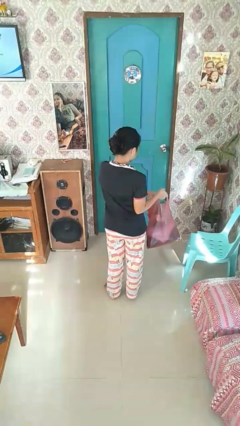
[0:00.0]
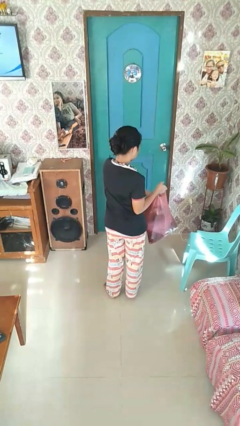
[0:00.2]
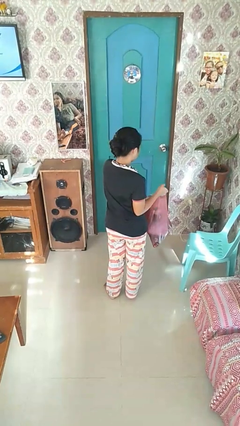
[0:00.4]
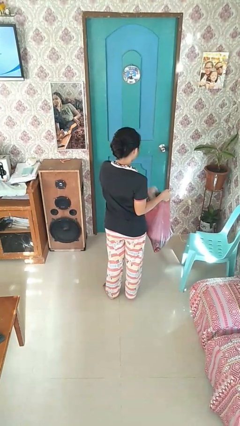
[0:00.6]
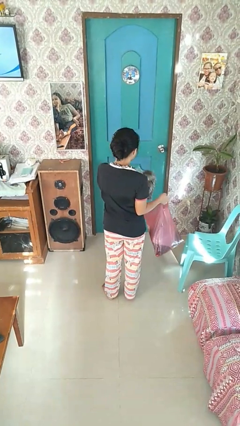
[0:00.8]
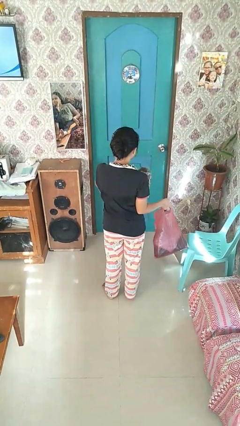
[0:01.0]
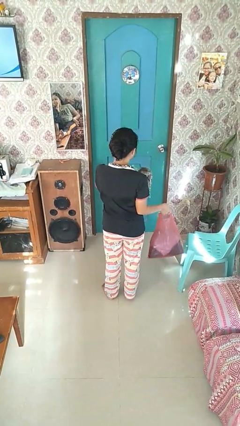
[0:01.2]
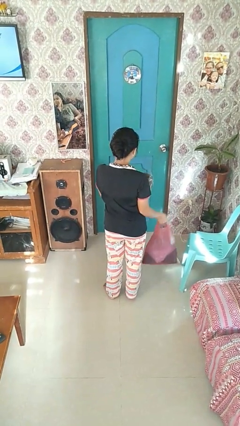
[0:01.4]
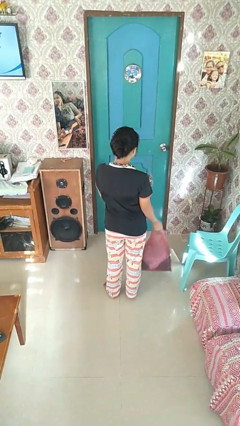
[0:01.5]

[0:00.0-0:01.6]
person takes object from bag

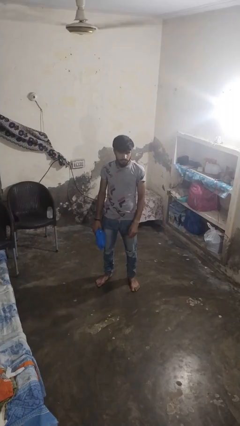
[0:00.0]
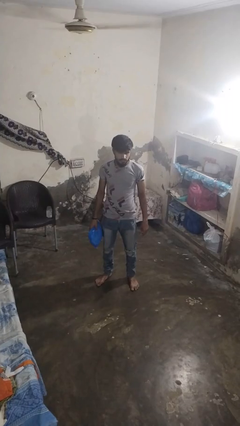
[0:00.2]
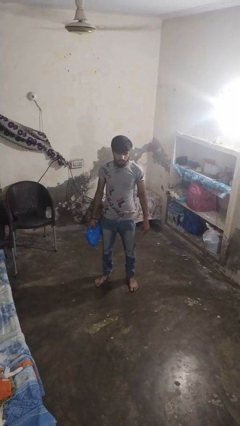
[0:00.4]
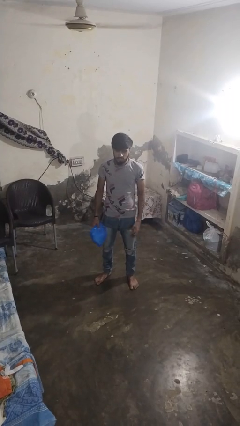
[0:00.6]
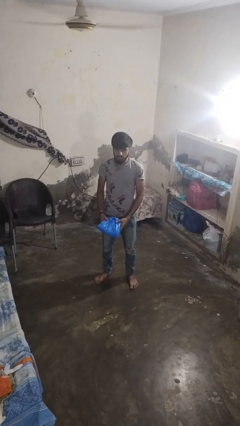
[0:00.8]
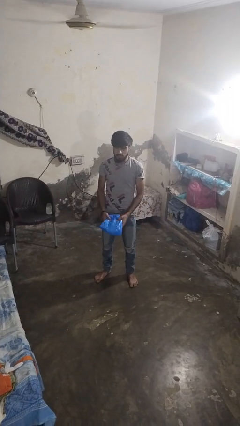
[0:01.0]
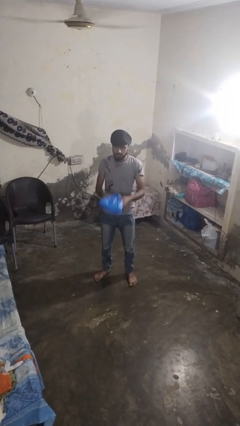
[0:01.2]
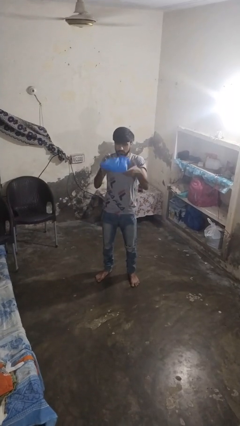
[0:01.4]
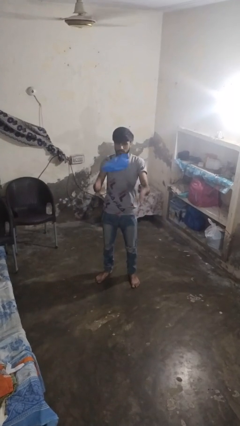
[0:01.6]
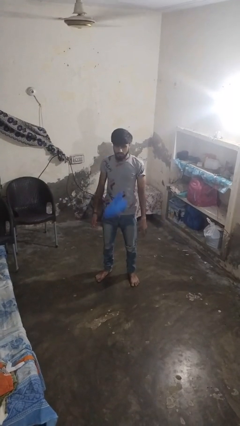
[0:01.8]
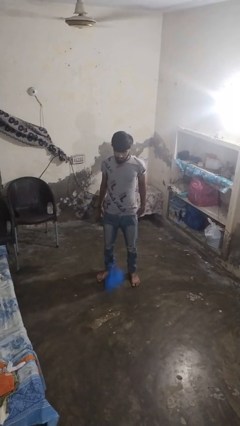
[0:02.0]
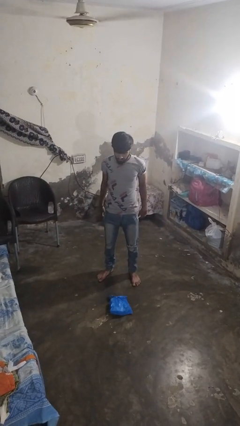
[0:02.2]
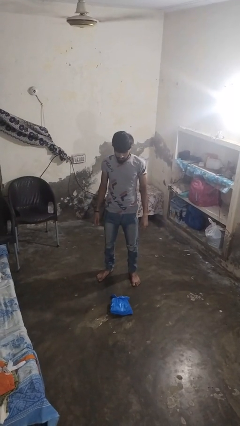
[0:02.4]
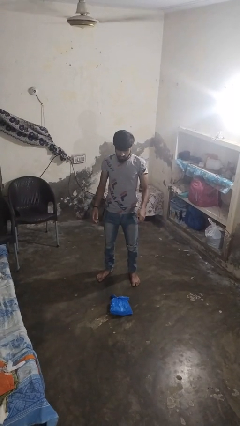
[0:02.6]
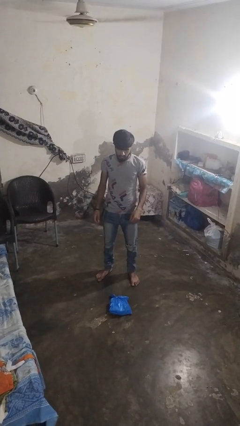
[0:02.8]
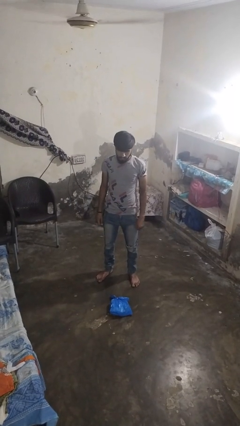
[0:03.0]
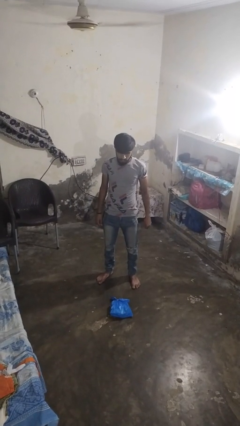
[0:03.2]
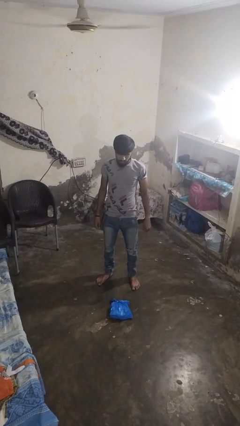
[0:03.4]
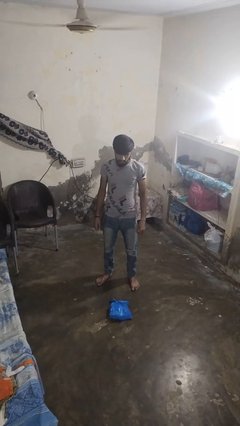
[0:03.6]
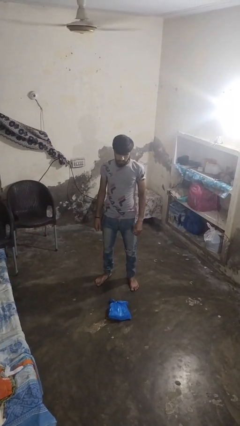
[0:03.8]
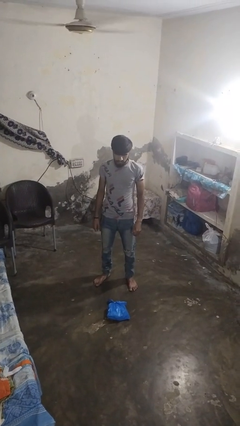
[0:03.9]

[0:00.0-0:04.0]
person throws object into air

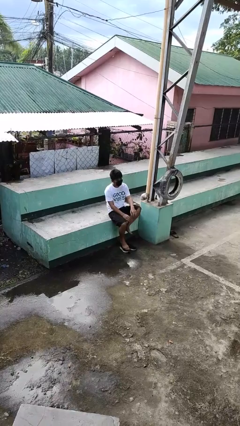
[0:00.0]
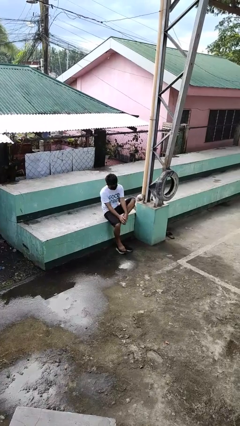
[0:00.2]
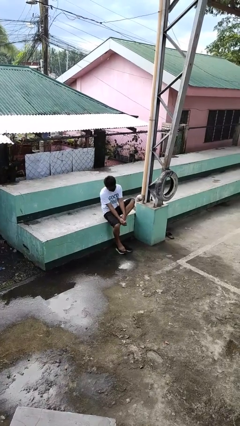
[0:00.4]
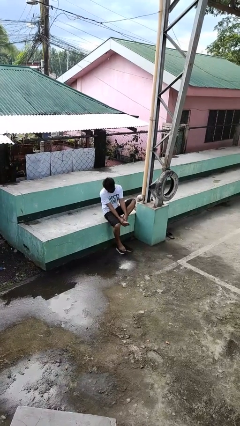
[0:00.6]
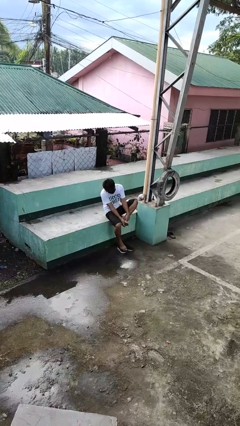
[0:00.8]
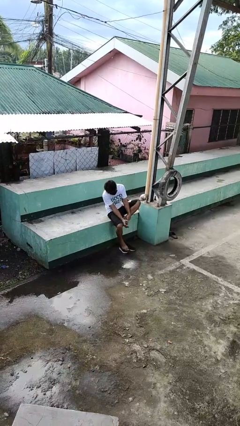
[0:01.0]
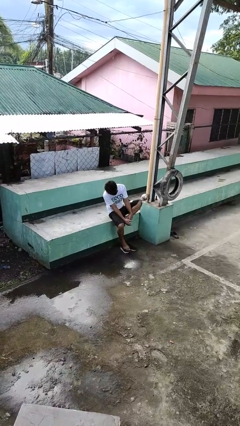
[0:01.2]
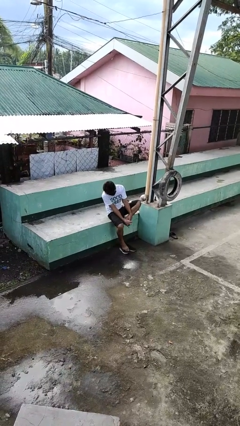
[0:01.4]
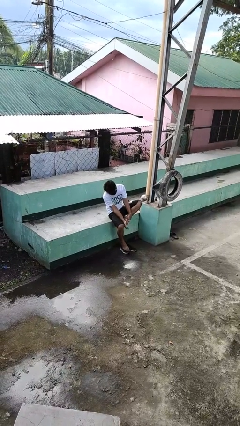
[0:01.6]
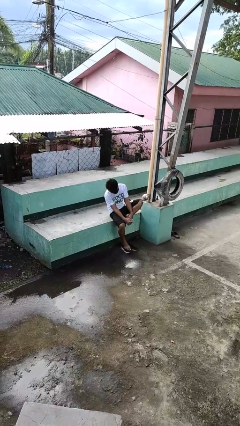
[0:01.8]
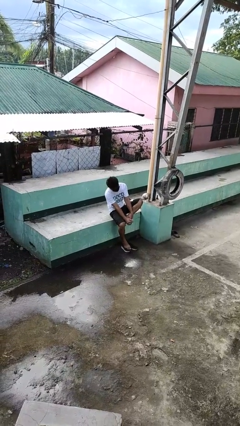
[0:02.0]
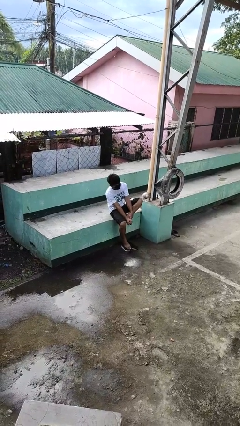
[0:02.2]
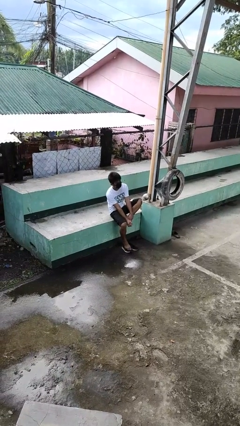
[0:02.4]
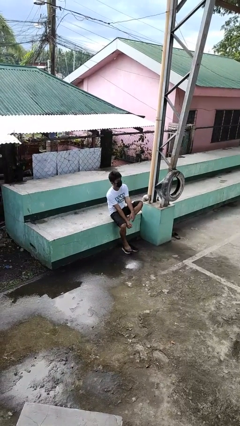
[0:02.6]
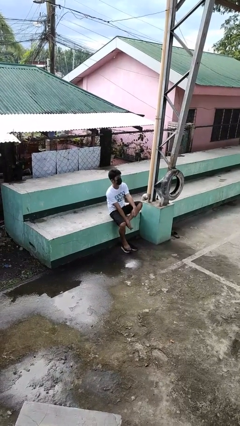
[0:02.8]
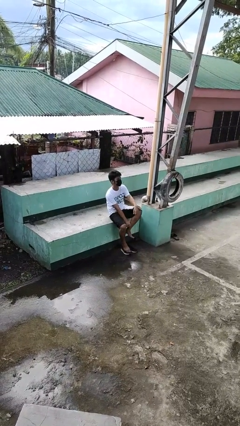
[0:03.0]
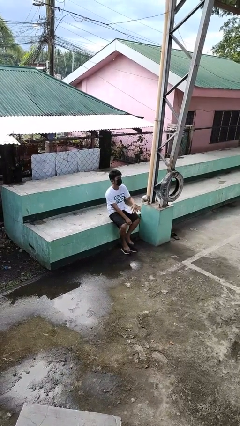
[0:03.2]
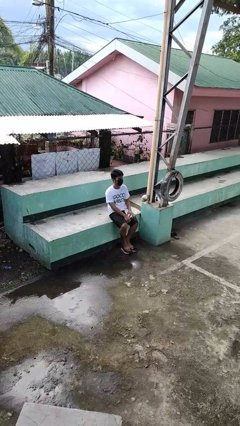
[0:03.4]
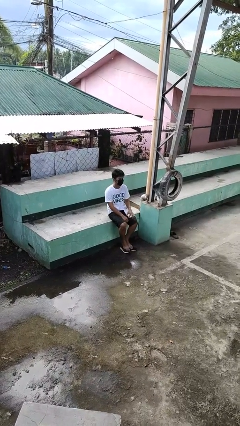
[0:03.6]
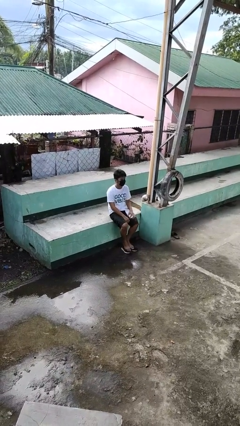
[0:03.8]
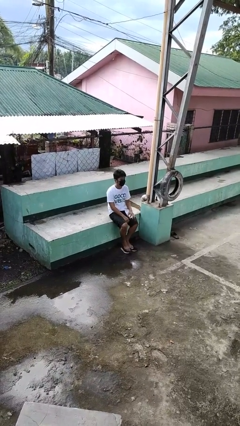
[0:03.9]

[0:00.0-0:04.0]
person rubs foot

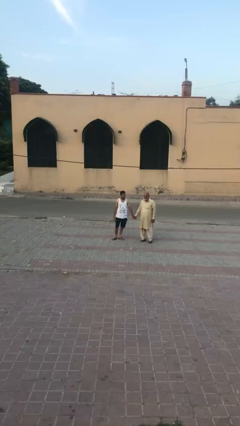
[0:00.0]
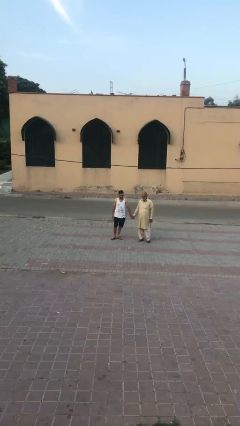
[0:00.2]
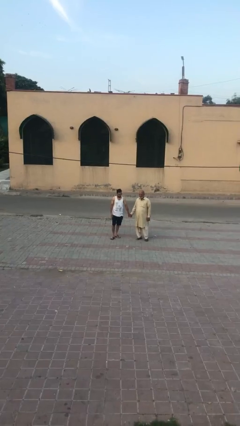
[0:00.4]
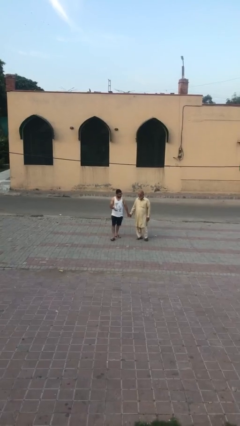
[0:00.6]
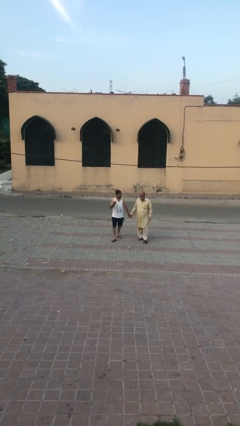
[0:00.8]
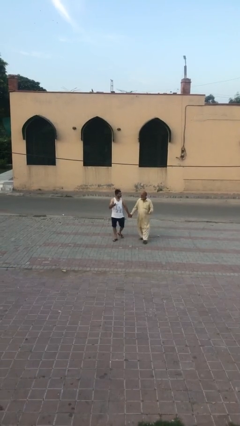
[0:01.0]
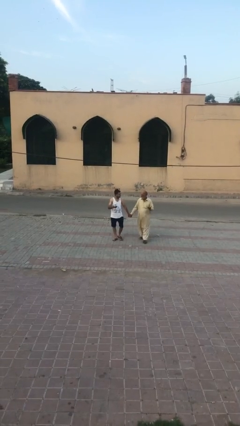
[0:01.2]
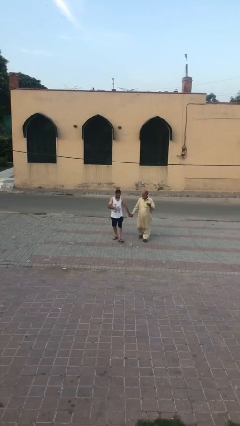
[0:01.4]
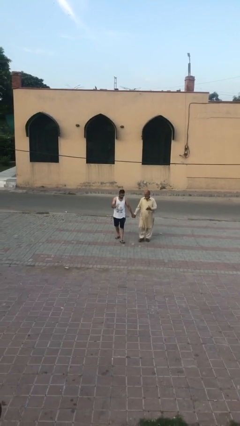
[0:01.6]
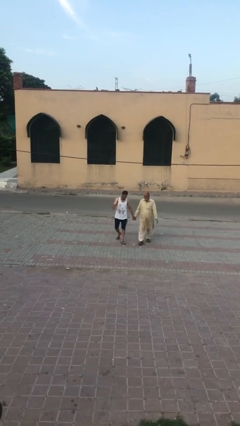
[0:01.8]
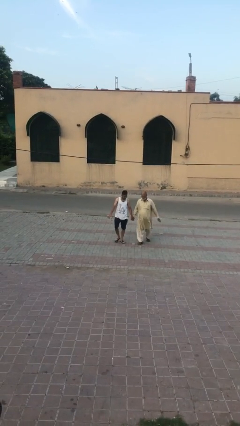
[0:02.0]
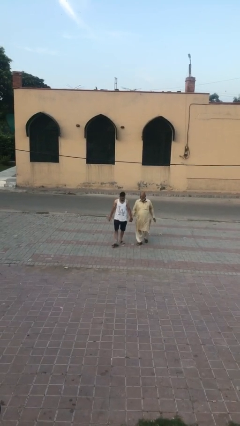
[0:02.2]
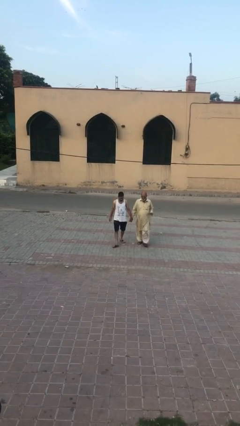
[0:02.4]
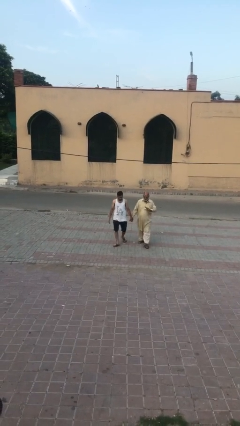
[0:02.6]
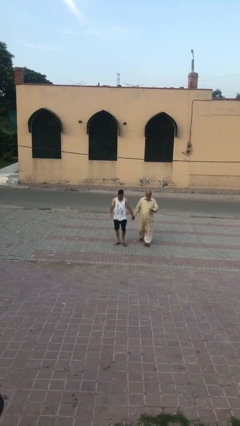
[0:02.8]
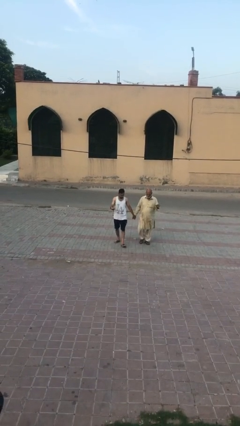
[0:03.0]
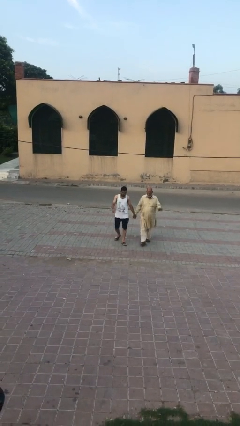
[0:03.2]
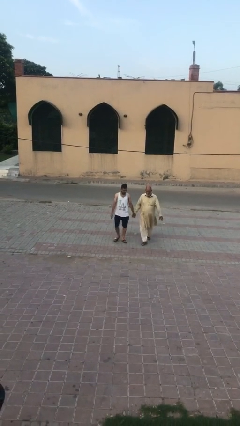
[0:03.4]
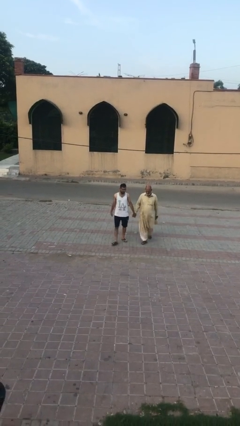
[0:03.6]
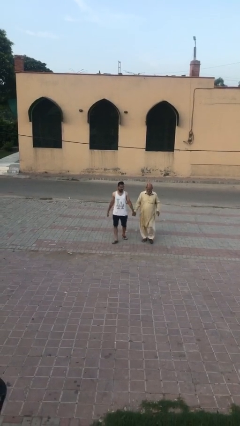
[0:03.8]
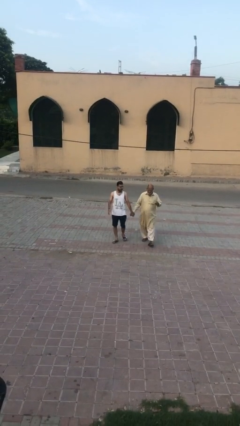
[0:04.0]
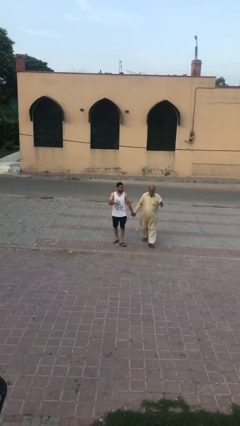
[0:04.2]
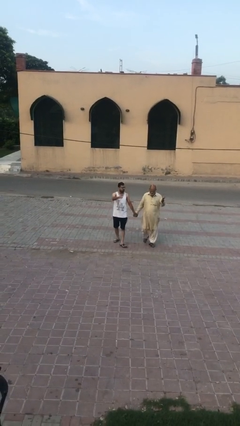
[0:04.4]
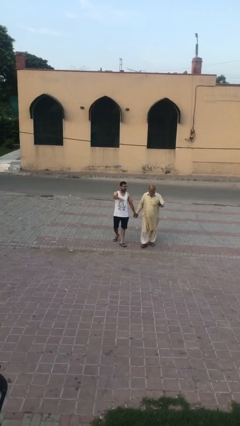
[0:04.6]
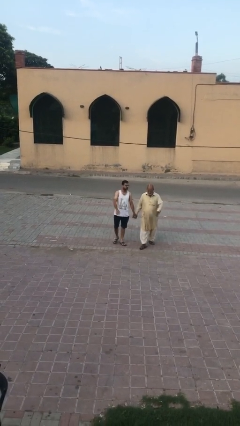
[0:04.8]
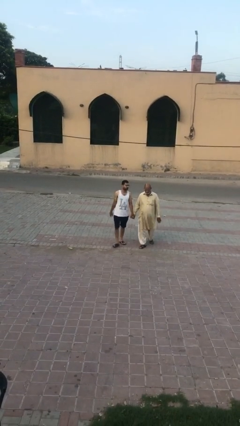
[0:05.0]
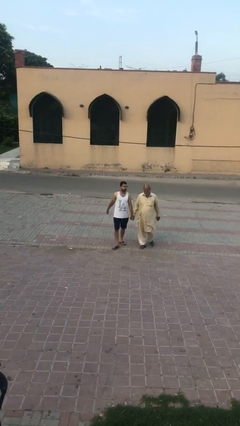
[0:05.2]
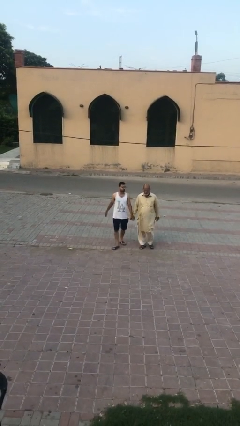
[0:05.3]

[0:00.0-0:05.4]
person holds hand

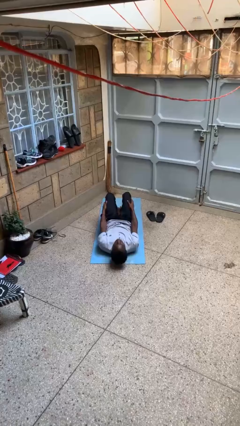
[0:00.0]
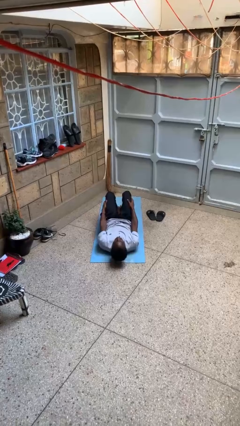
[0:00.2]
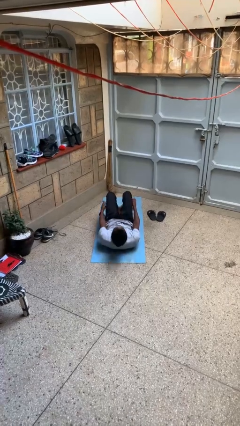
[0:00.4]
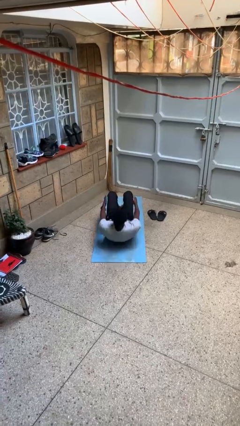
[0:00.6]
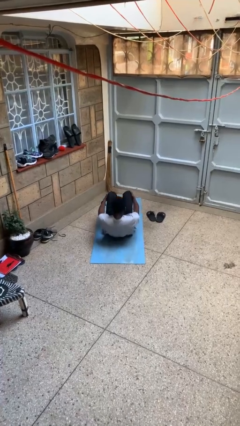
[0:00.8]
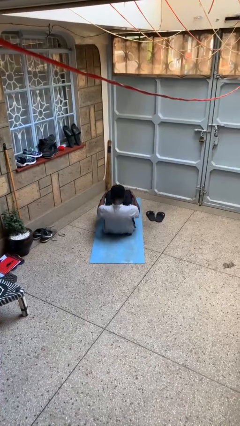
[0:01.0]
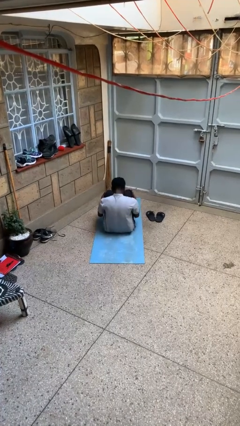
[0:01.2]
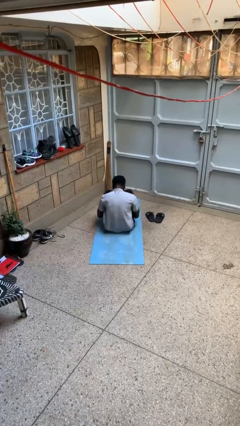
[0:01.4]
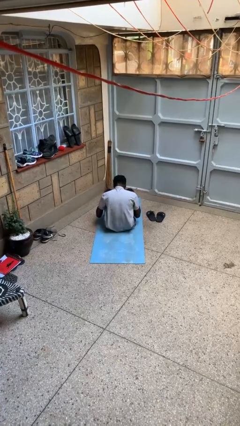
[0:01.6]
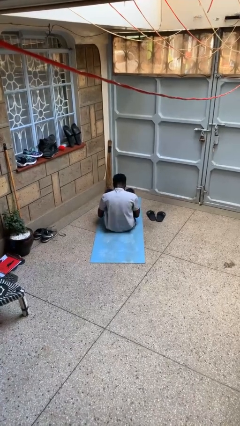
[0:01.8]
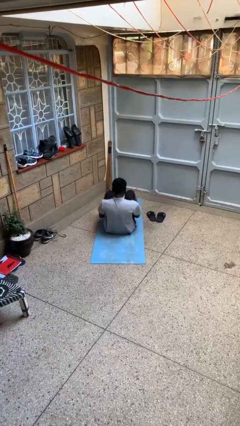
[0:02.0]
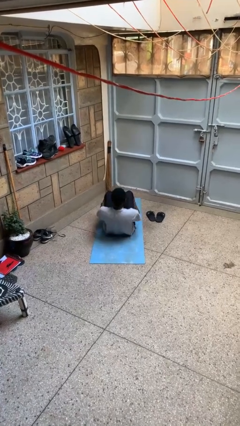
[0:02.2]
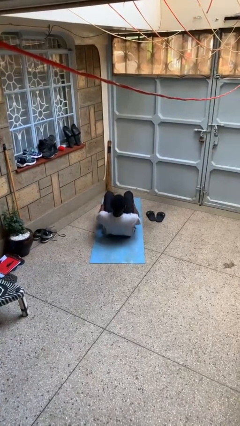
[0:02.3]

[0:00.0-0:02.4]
person exercises with situp

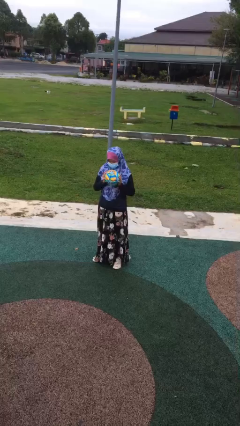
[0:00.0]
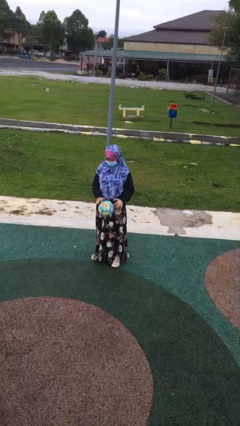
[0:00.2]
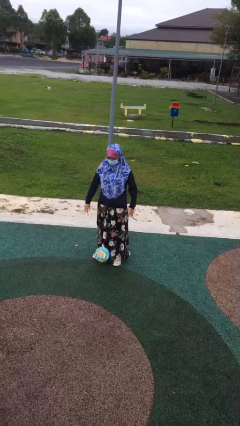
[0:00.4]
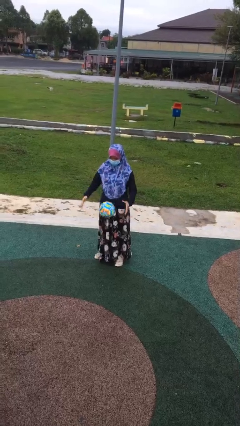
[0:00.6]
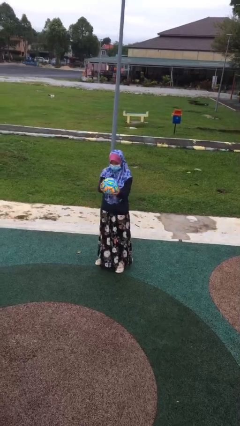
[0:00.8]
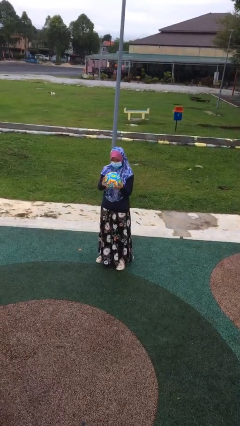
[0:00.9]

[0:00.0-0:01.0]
person bounces ball on floor
